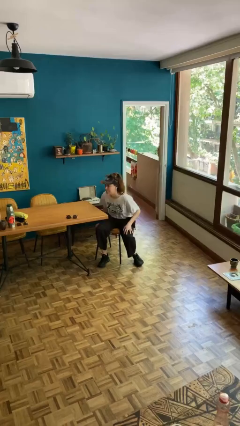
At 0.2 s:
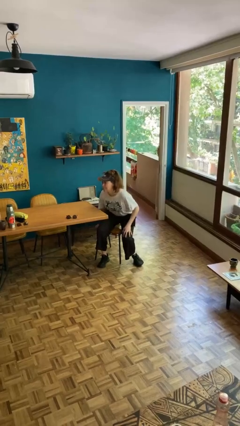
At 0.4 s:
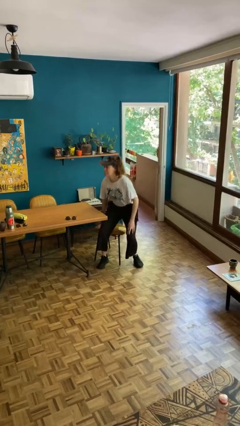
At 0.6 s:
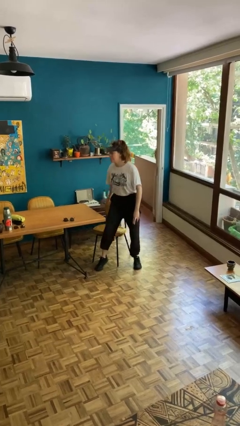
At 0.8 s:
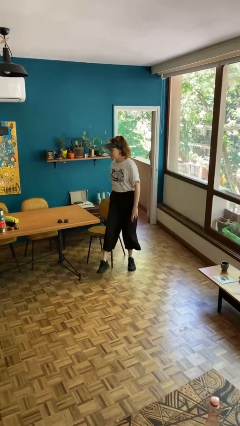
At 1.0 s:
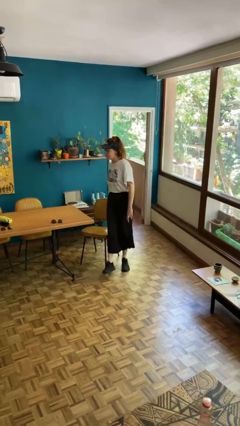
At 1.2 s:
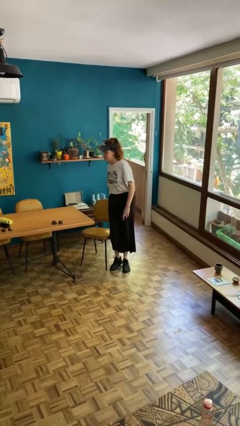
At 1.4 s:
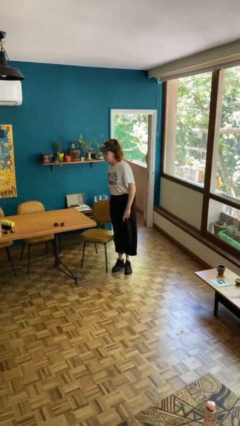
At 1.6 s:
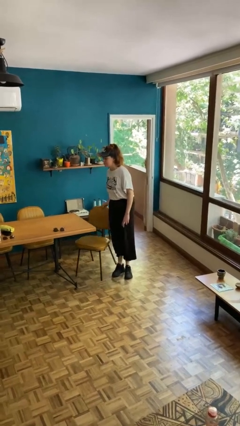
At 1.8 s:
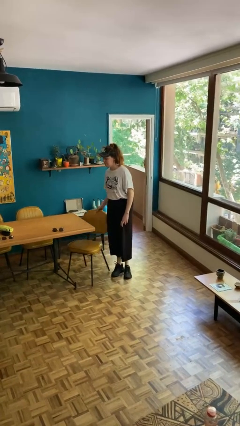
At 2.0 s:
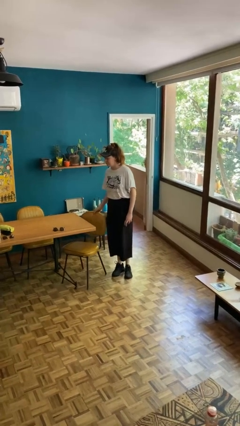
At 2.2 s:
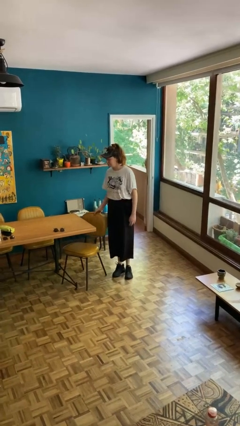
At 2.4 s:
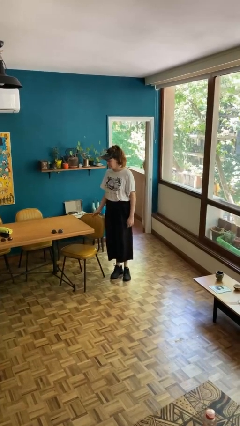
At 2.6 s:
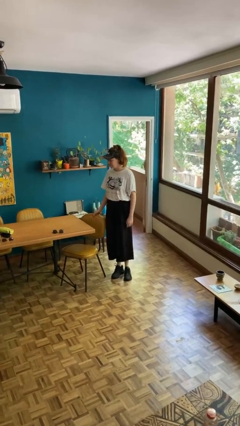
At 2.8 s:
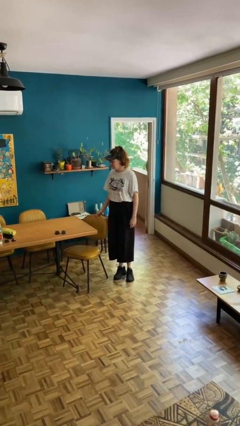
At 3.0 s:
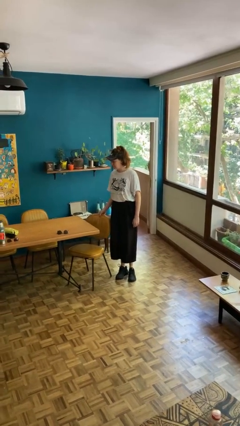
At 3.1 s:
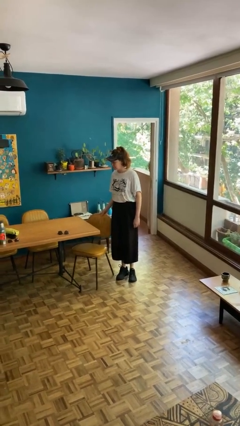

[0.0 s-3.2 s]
person stands up

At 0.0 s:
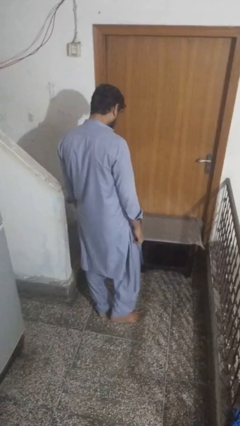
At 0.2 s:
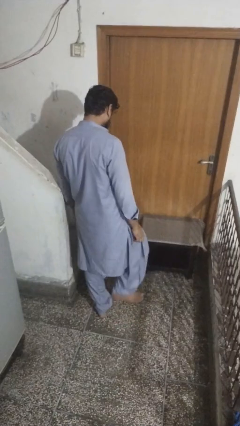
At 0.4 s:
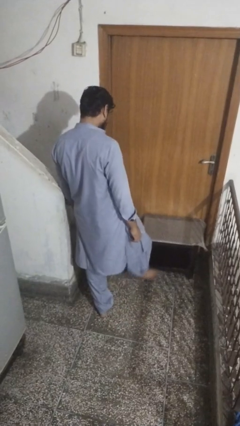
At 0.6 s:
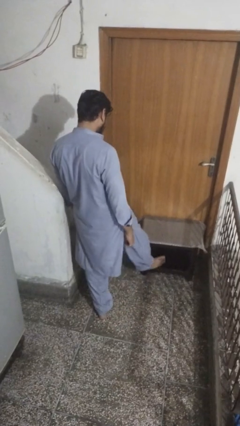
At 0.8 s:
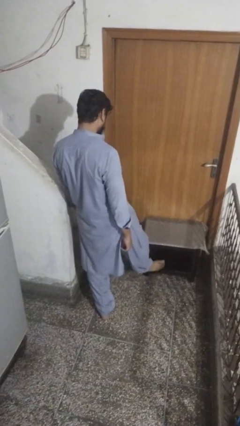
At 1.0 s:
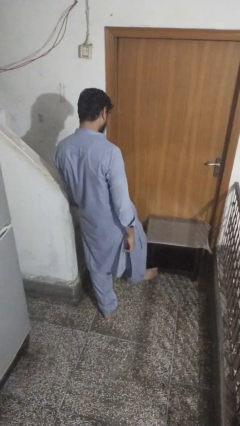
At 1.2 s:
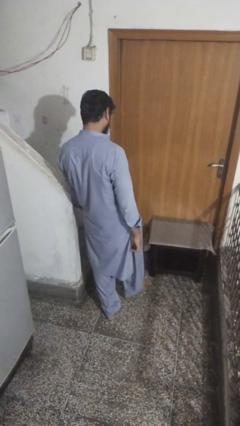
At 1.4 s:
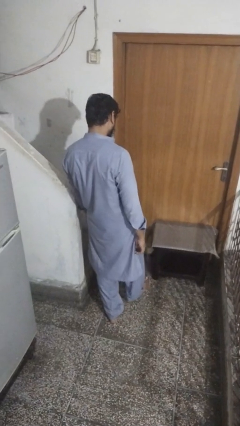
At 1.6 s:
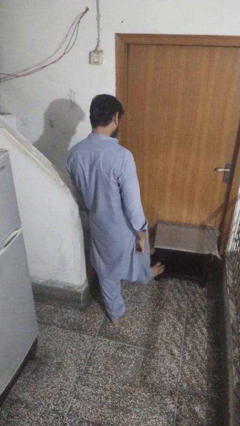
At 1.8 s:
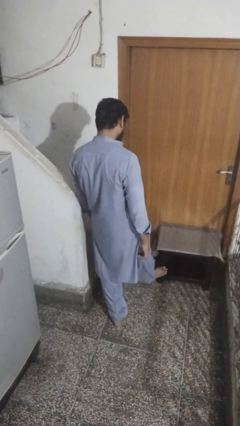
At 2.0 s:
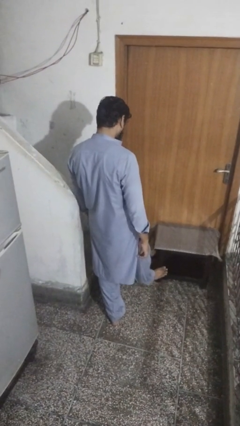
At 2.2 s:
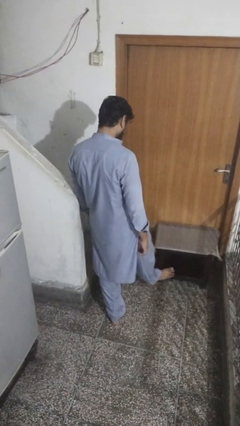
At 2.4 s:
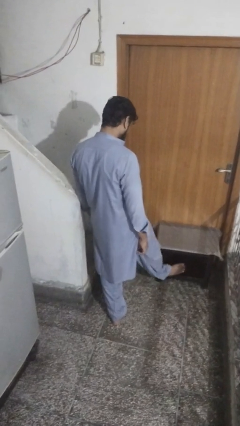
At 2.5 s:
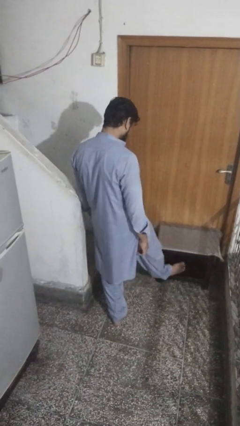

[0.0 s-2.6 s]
person stubs toe

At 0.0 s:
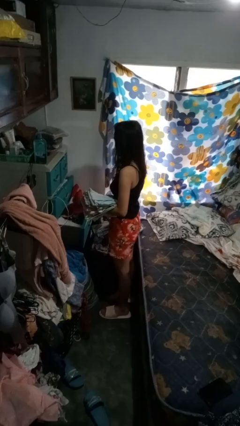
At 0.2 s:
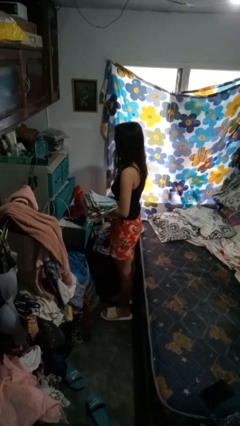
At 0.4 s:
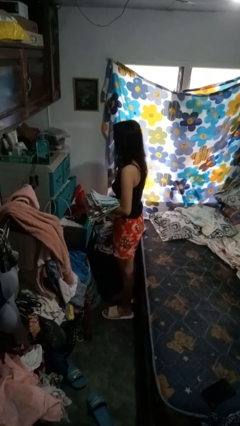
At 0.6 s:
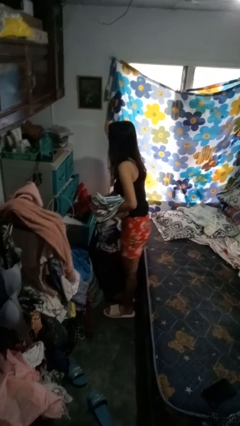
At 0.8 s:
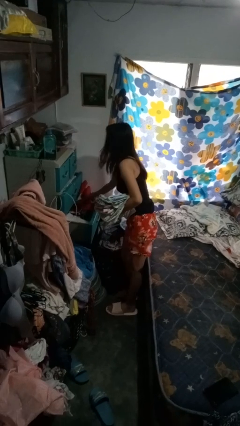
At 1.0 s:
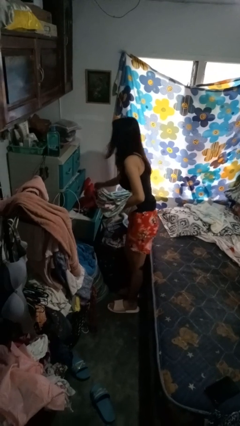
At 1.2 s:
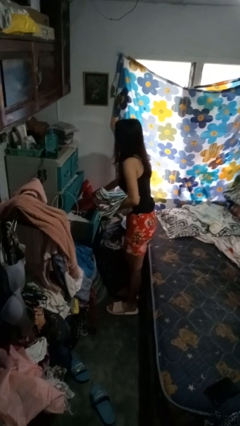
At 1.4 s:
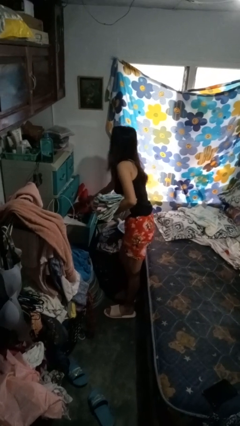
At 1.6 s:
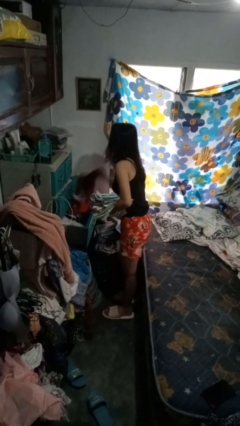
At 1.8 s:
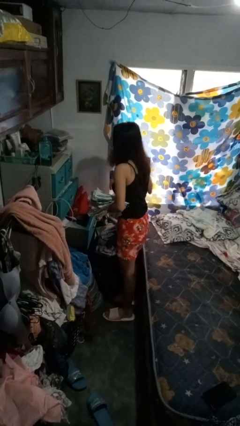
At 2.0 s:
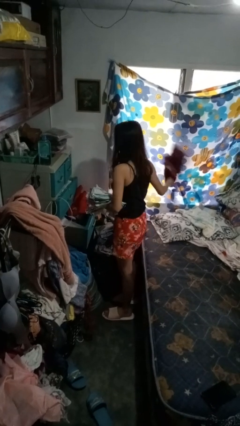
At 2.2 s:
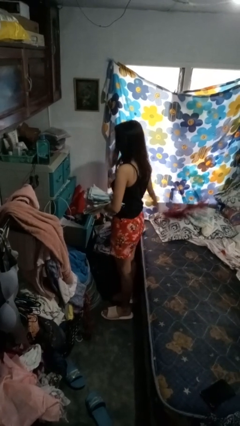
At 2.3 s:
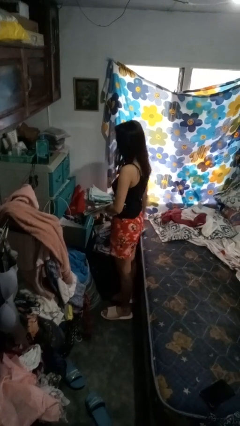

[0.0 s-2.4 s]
person takes clothes from dresser

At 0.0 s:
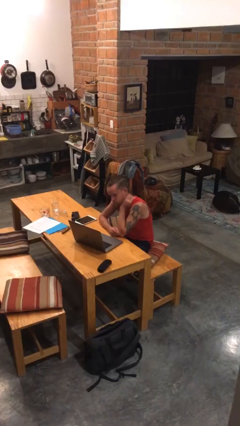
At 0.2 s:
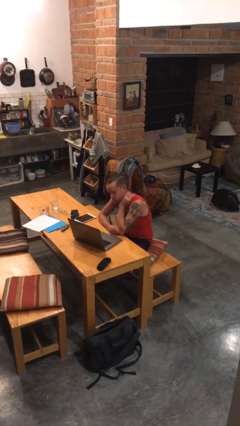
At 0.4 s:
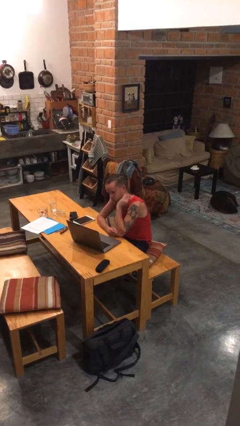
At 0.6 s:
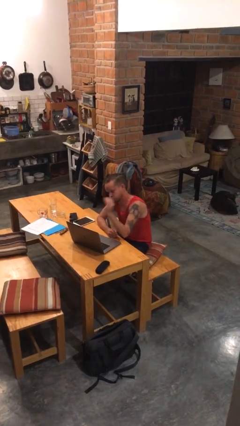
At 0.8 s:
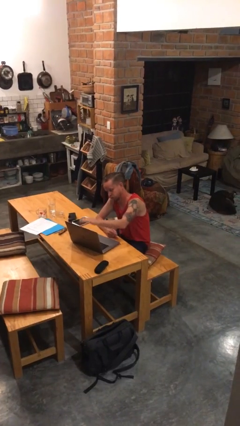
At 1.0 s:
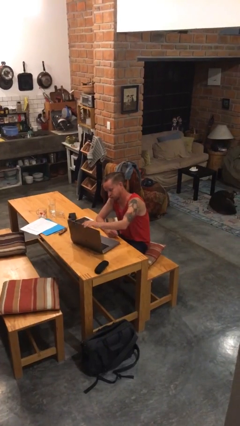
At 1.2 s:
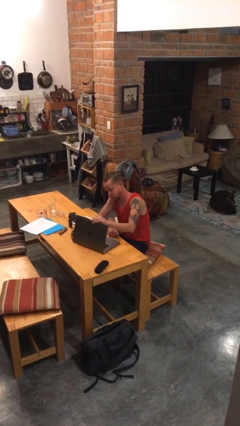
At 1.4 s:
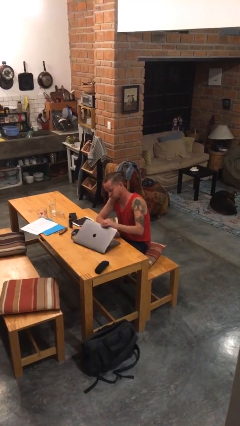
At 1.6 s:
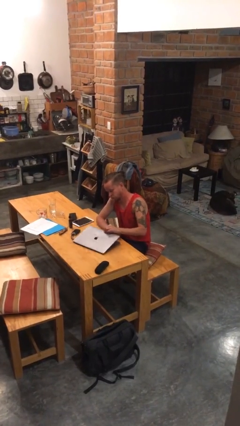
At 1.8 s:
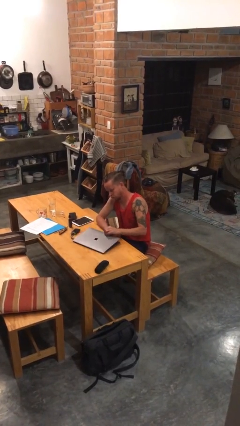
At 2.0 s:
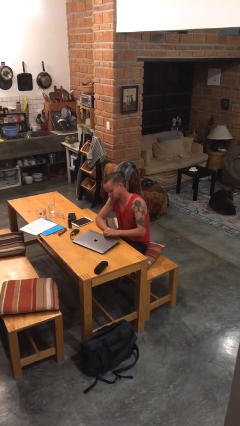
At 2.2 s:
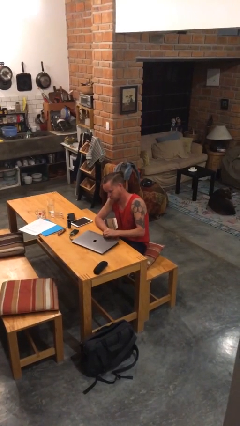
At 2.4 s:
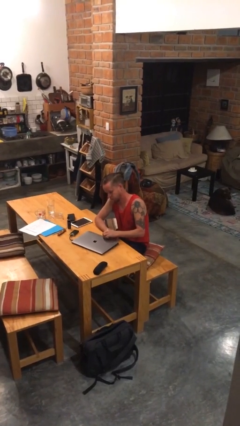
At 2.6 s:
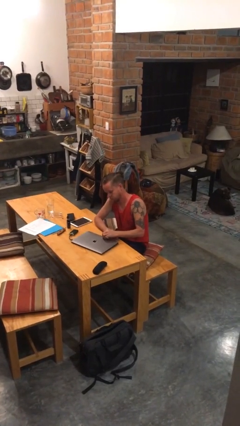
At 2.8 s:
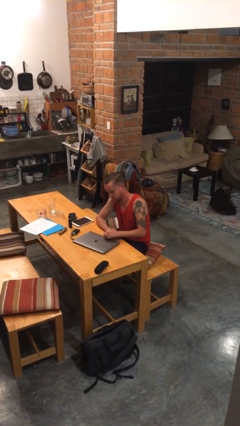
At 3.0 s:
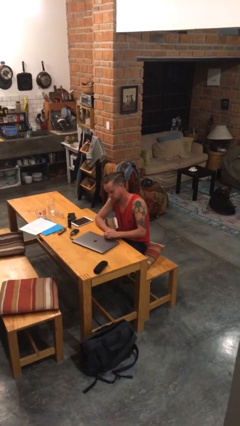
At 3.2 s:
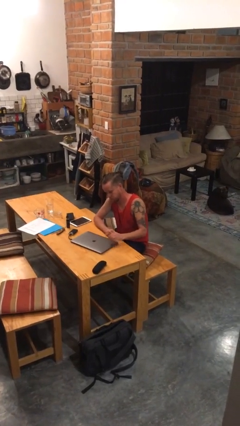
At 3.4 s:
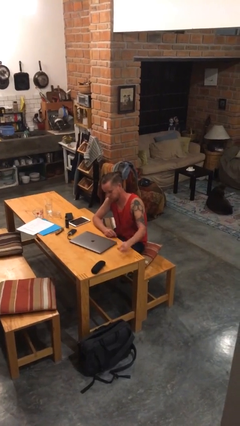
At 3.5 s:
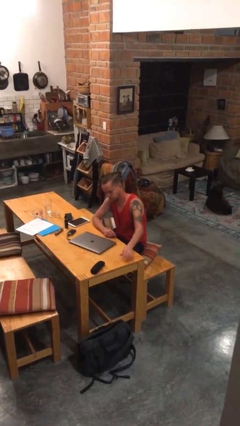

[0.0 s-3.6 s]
person closes laptop

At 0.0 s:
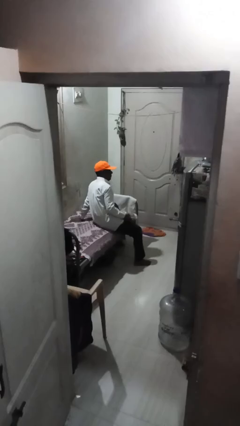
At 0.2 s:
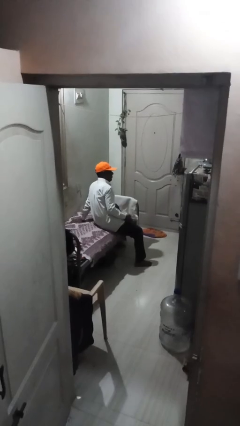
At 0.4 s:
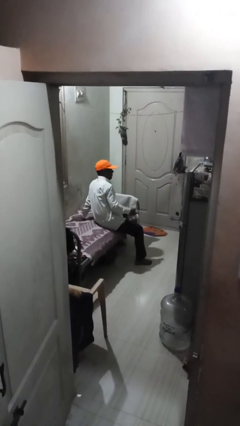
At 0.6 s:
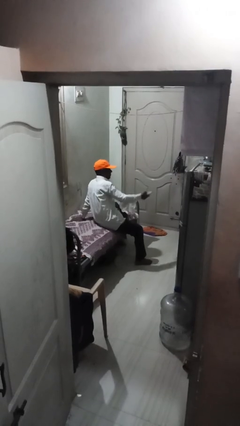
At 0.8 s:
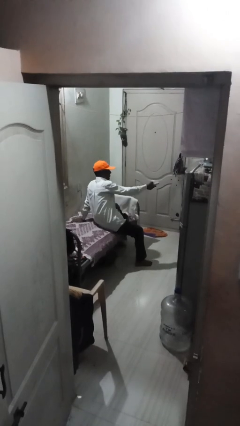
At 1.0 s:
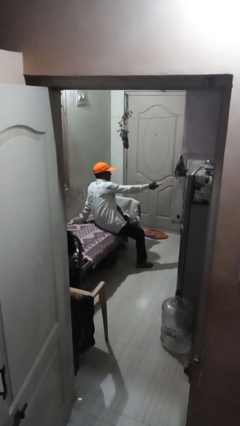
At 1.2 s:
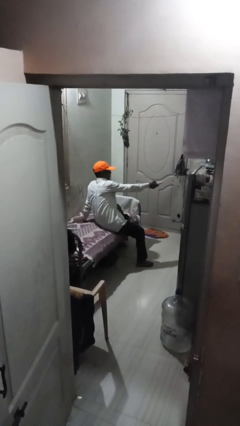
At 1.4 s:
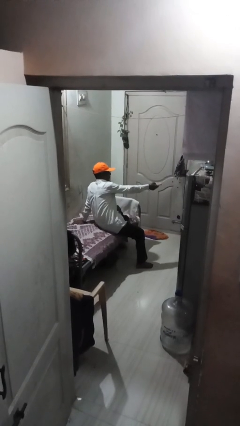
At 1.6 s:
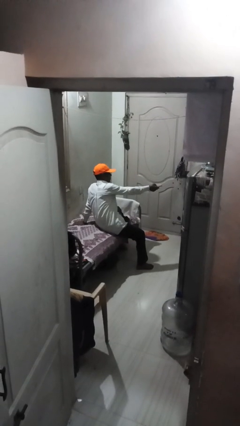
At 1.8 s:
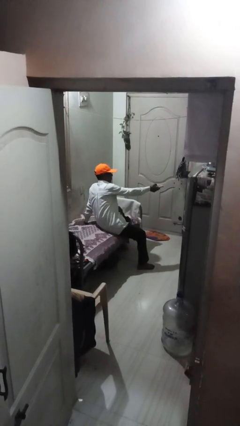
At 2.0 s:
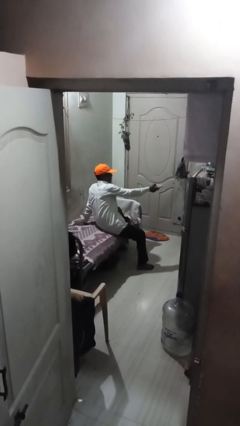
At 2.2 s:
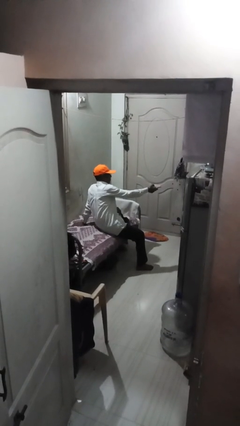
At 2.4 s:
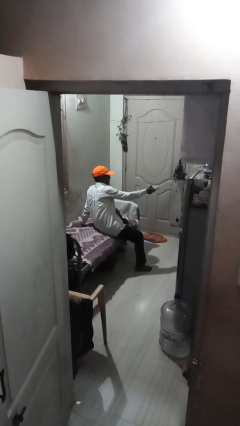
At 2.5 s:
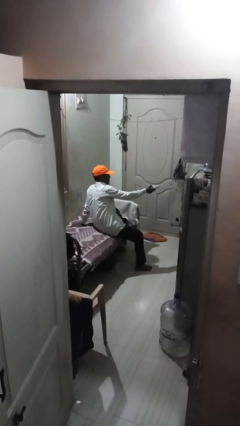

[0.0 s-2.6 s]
person uses television remote

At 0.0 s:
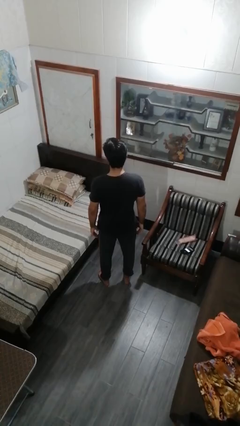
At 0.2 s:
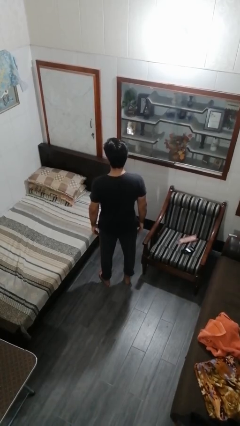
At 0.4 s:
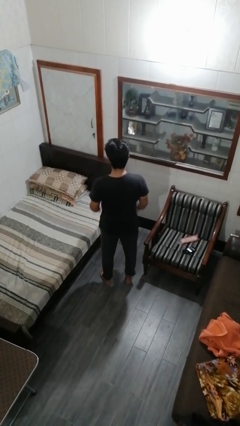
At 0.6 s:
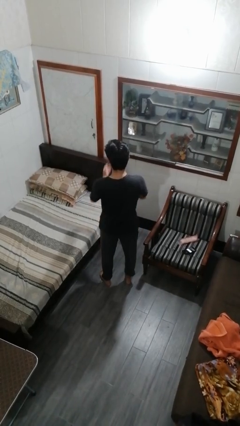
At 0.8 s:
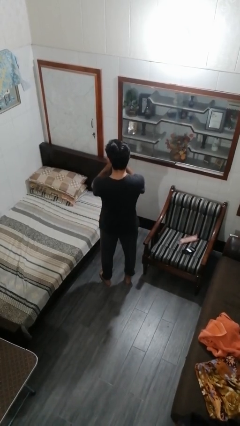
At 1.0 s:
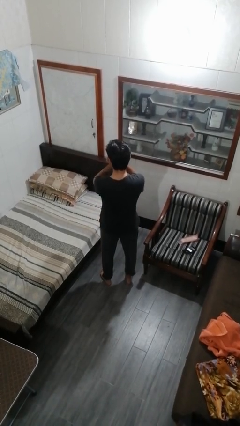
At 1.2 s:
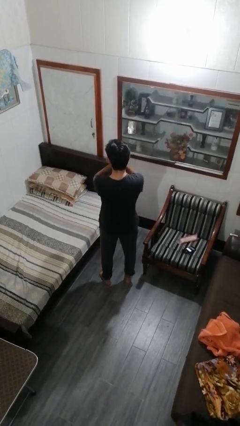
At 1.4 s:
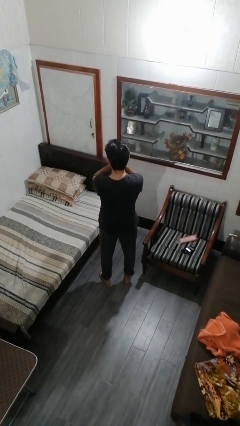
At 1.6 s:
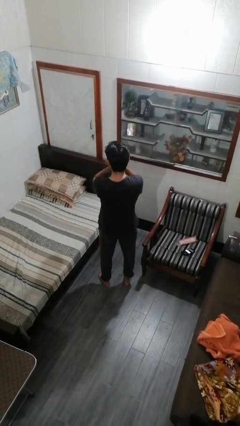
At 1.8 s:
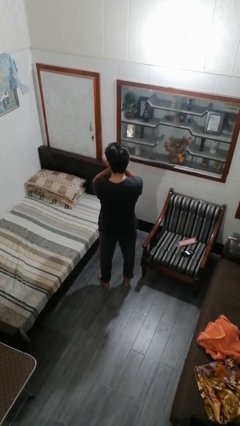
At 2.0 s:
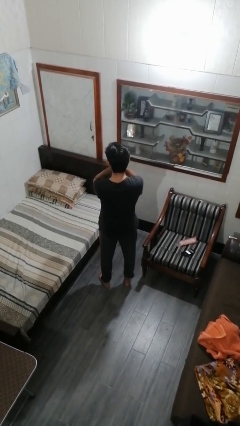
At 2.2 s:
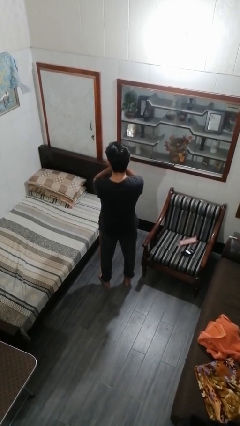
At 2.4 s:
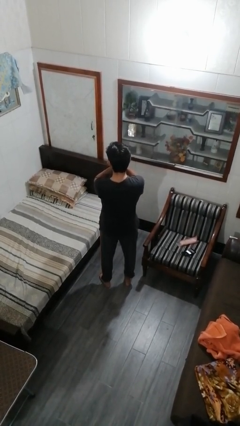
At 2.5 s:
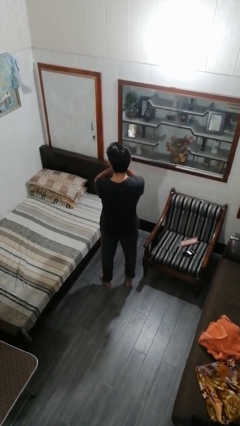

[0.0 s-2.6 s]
person covers face with hands

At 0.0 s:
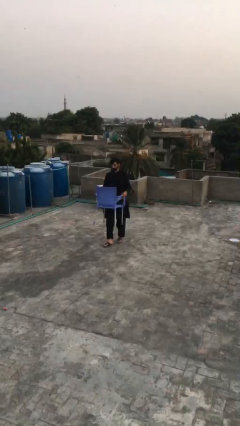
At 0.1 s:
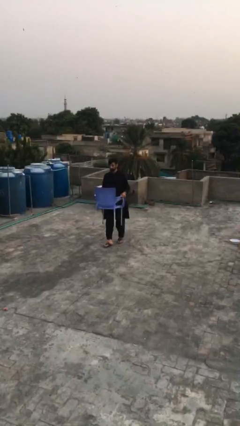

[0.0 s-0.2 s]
person puts down object on floor
